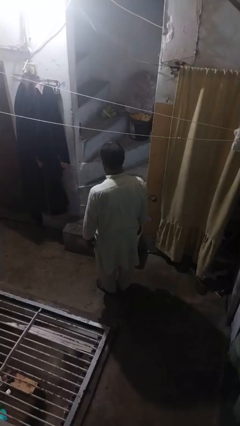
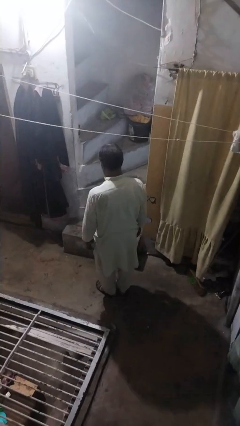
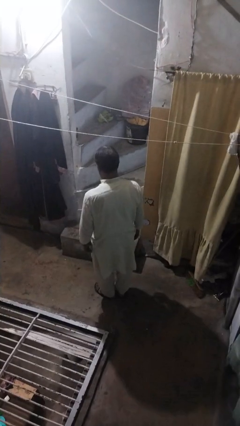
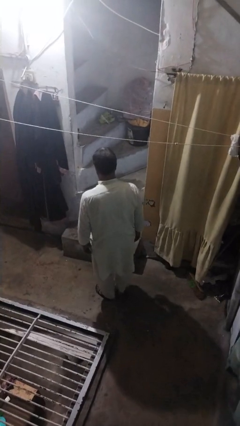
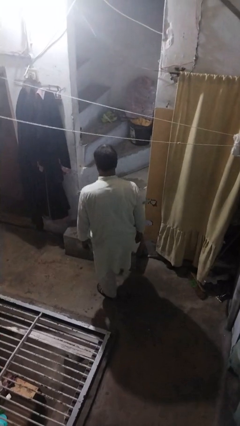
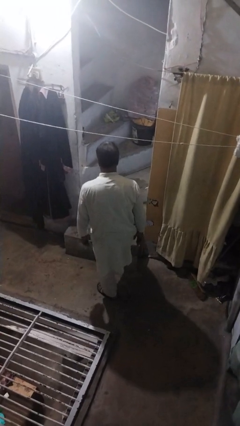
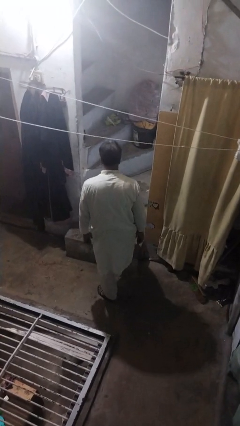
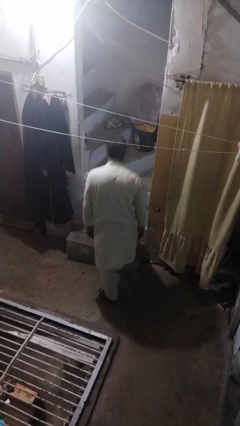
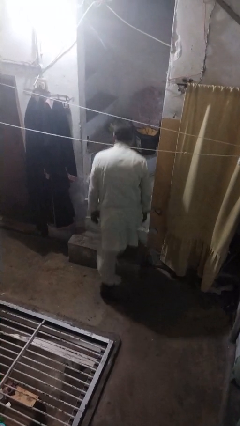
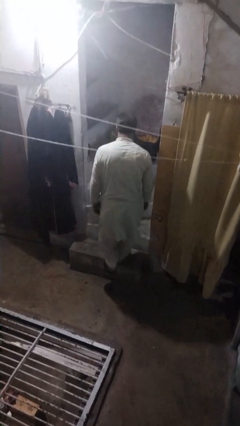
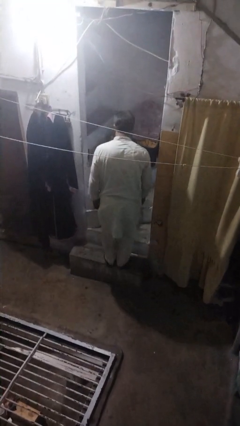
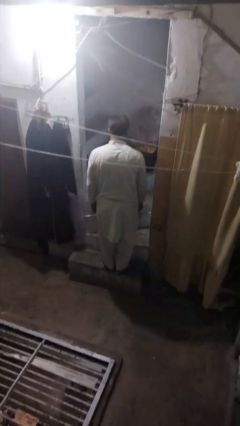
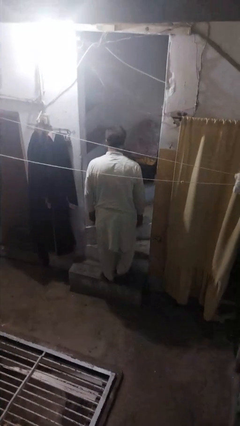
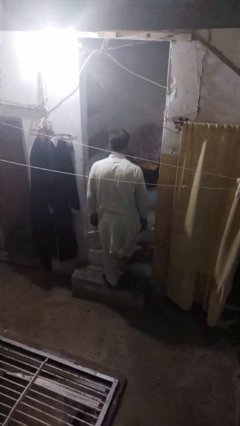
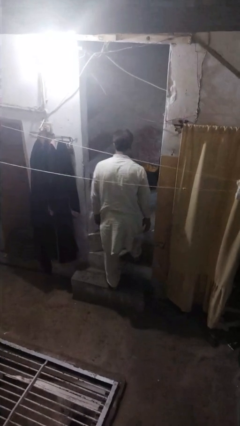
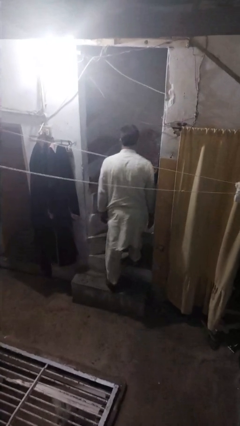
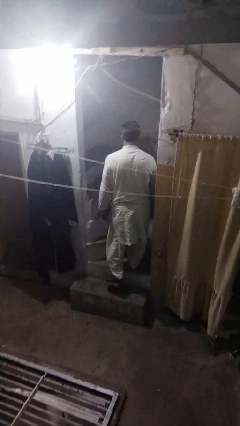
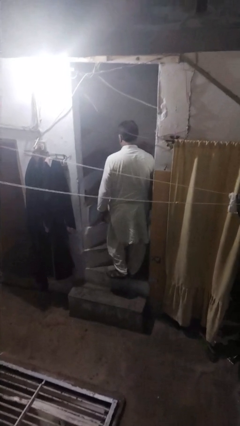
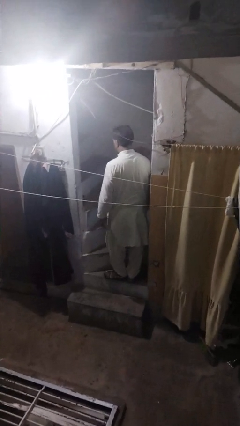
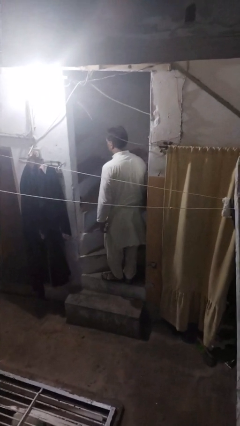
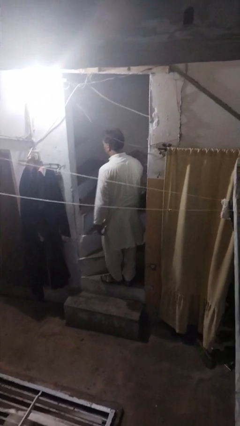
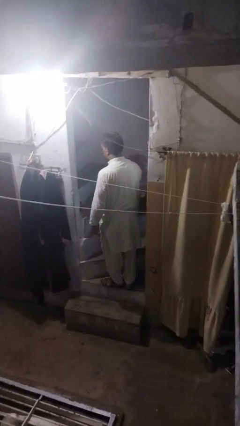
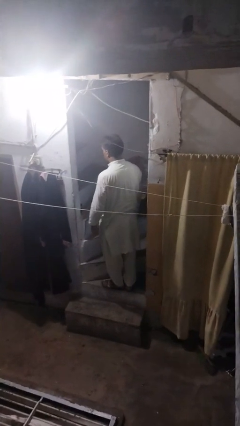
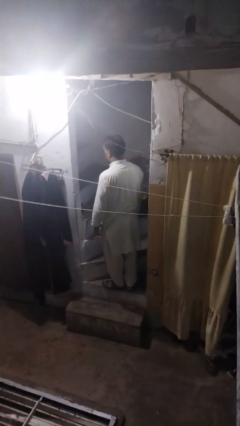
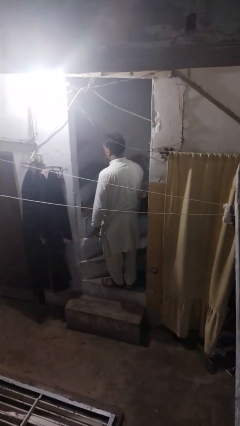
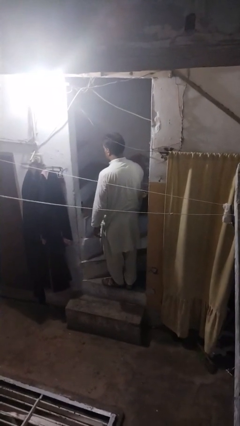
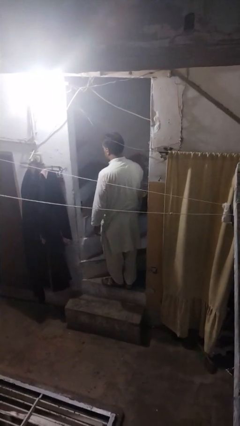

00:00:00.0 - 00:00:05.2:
person climbs up stairs

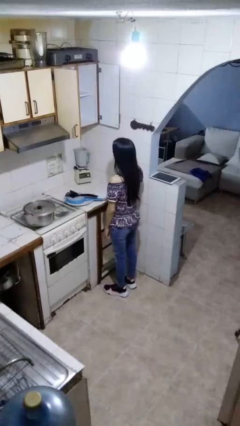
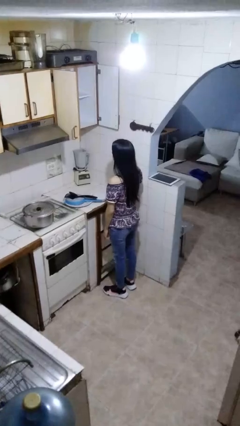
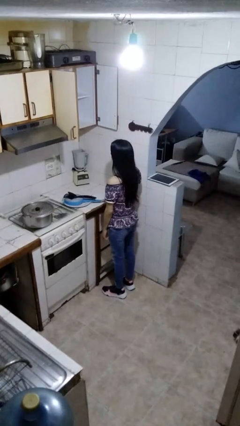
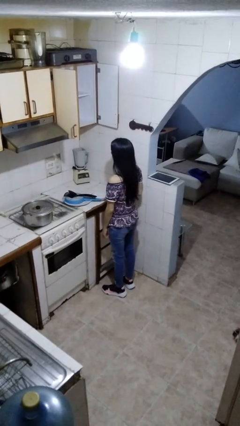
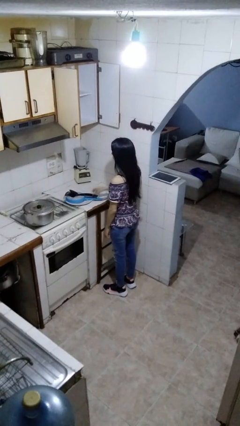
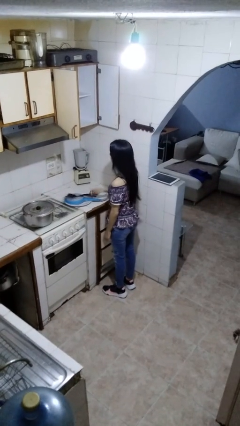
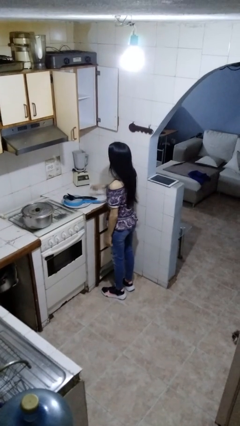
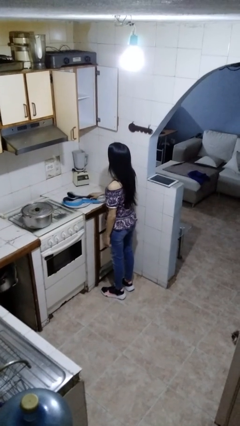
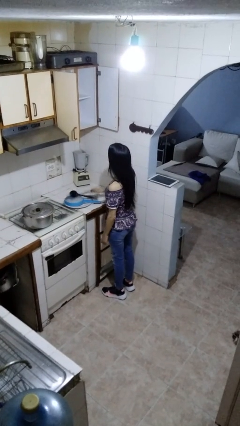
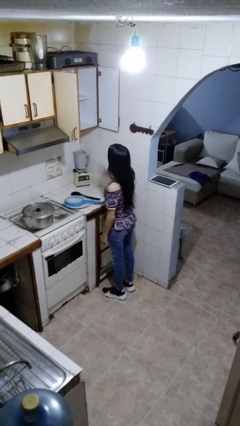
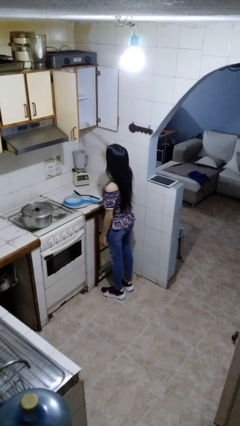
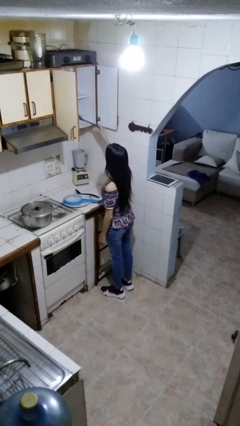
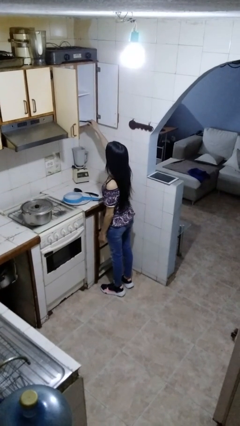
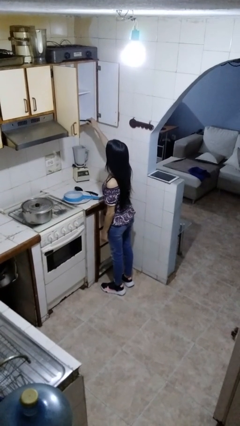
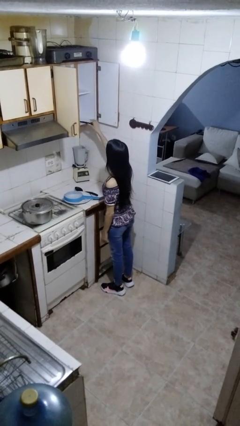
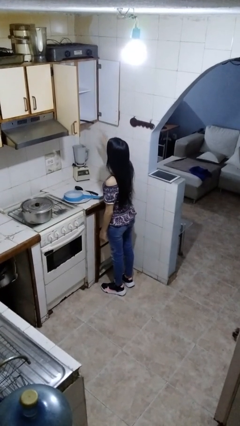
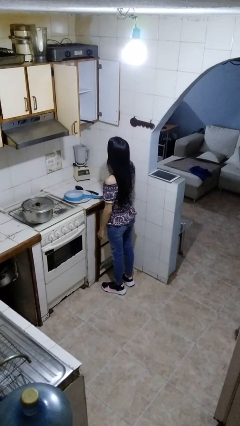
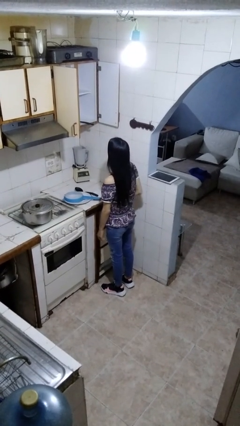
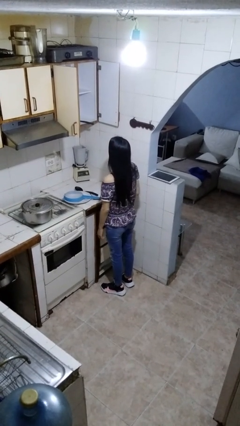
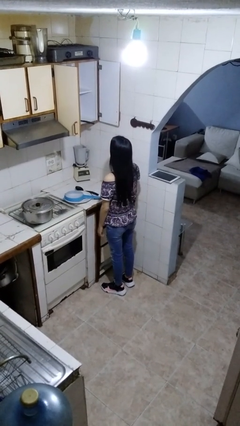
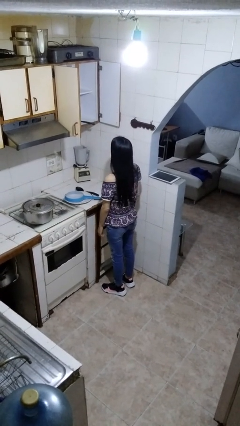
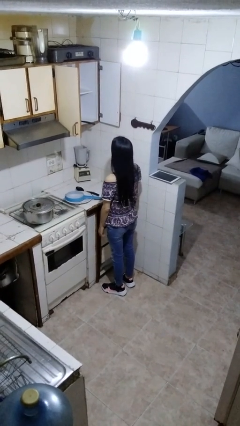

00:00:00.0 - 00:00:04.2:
person puts object in cabinet

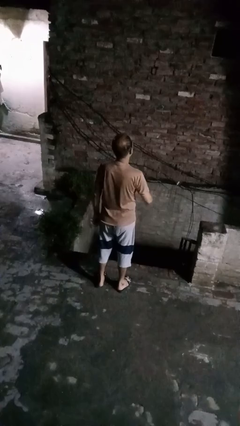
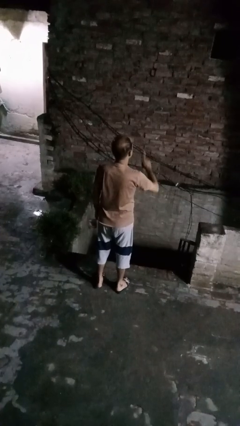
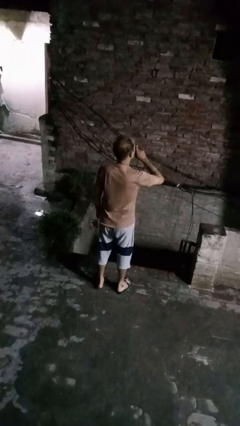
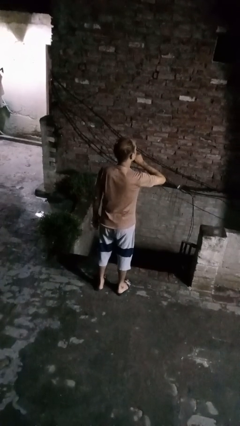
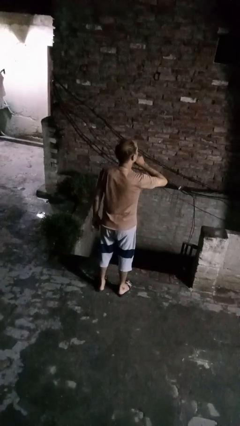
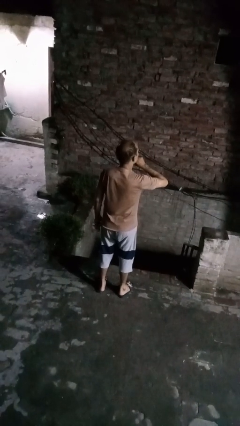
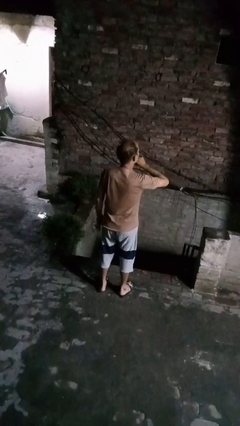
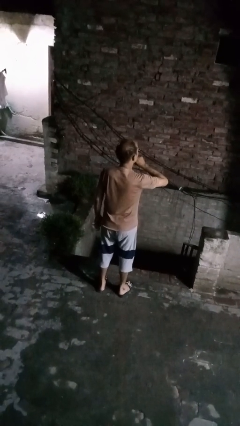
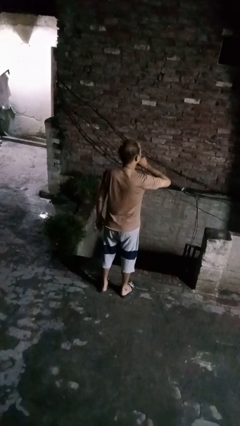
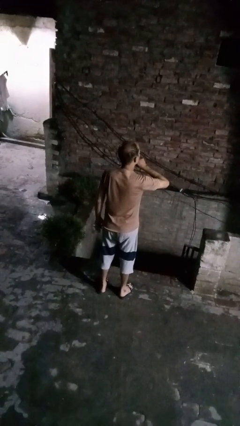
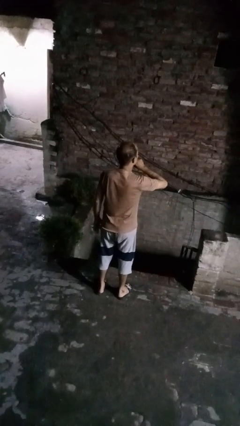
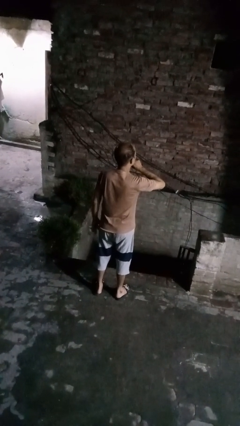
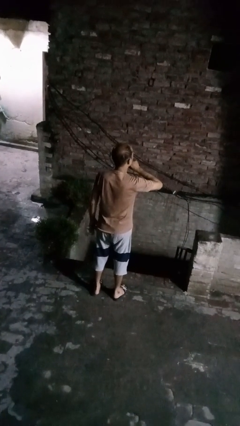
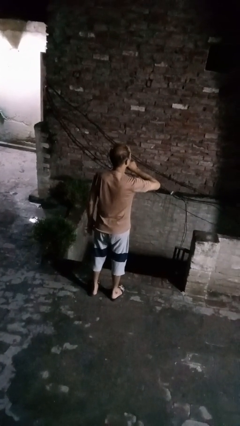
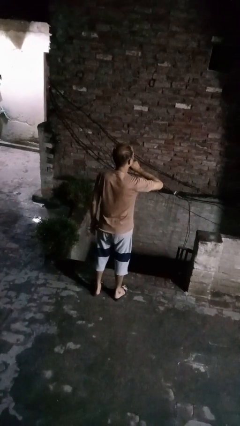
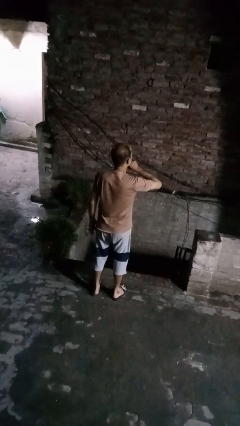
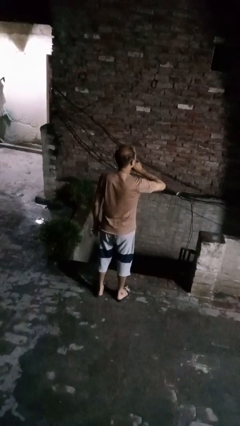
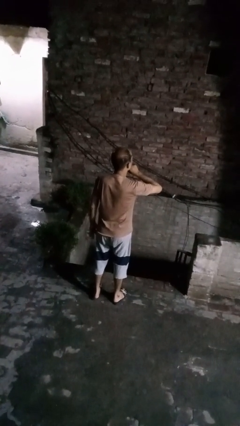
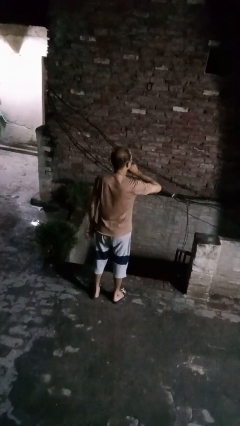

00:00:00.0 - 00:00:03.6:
person gestures be quiet

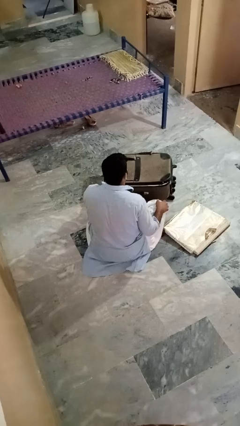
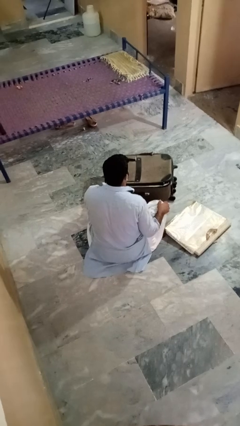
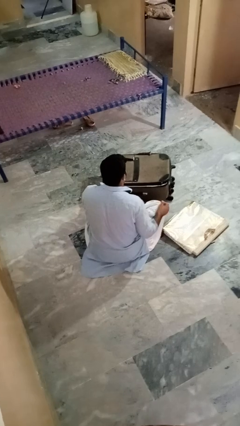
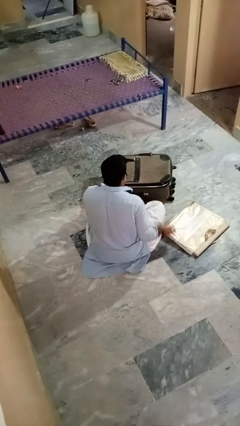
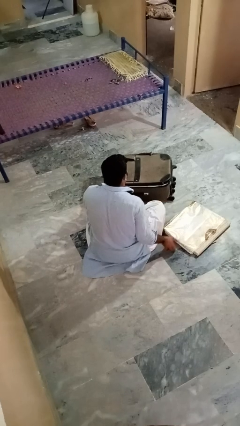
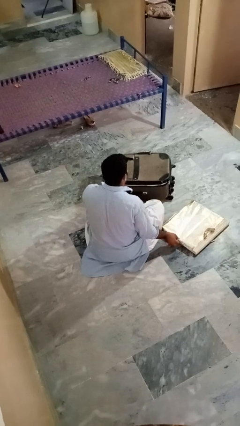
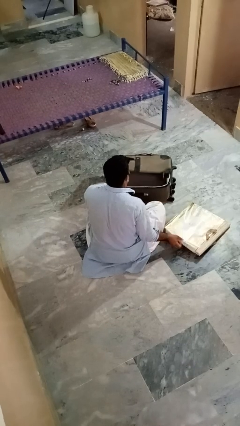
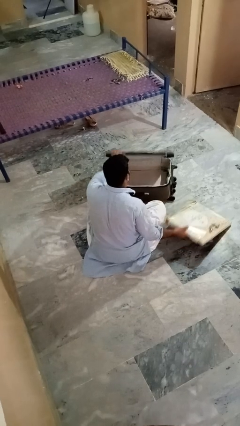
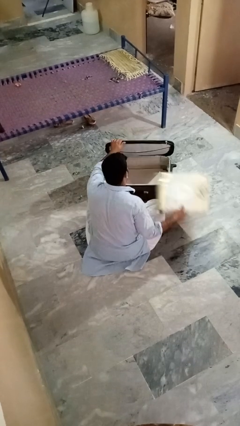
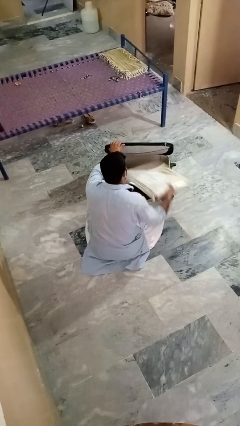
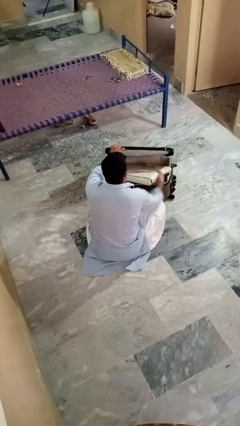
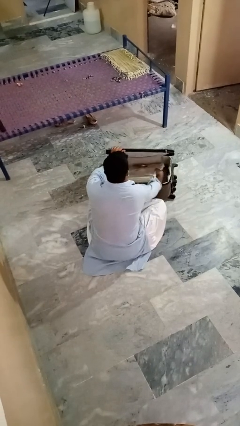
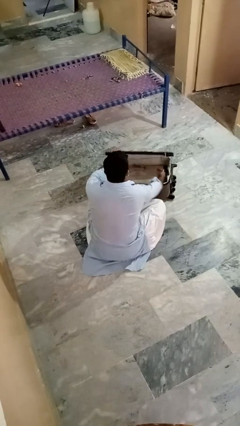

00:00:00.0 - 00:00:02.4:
person puts object into bag

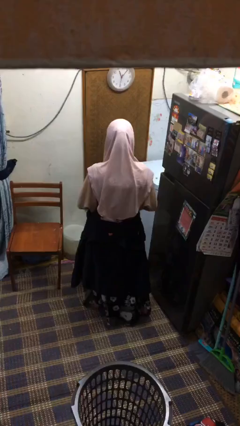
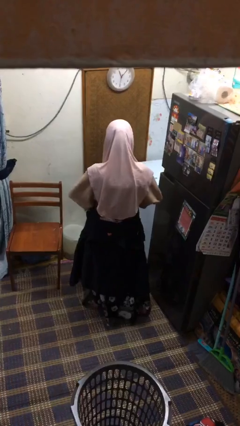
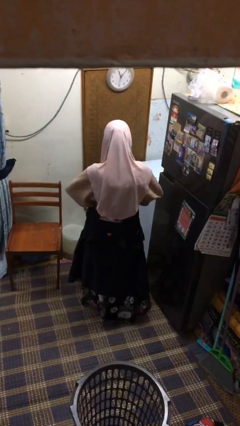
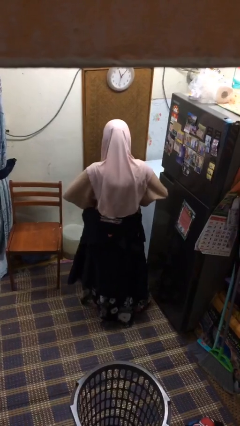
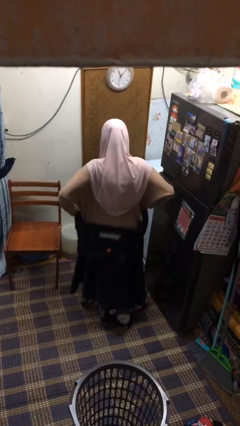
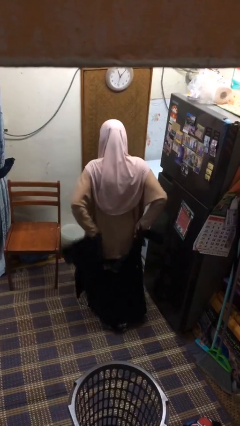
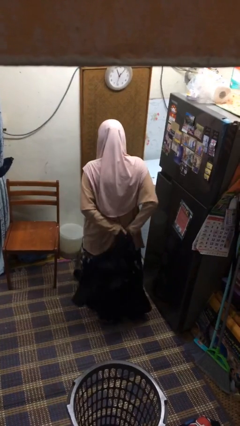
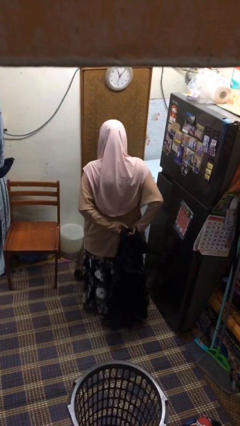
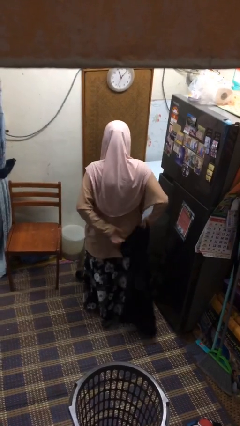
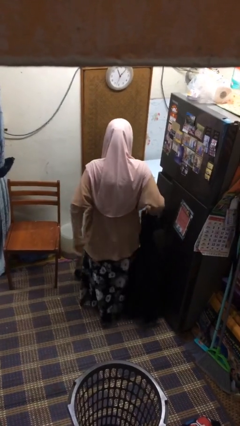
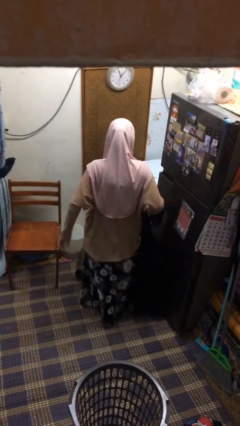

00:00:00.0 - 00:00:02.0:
person unties jacket around waist

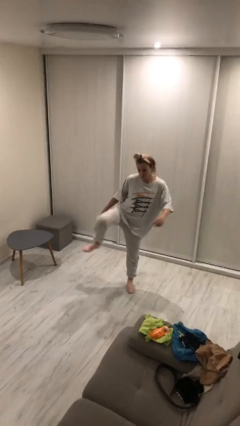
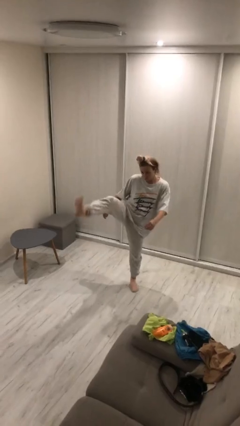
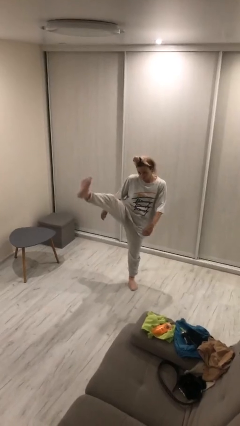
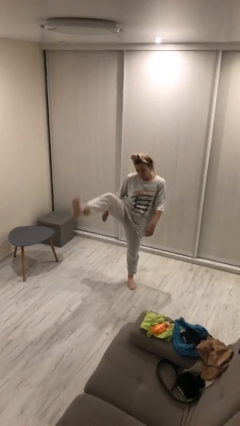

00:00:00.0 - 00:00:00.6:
person karate kicks
